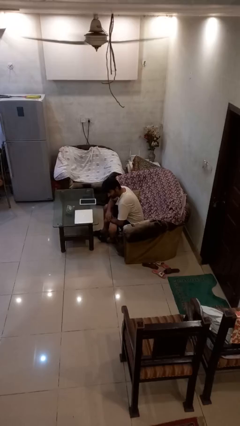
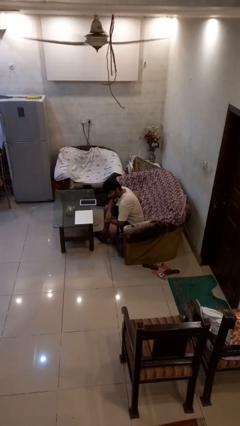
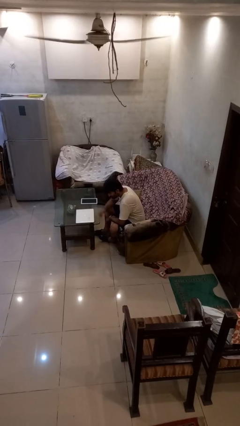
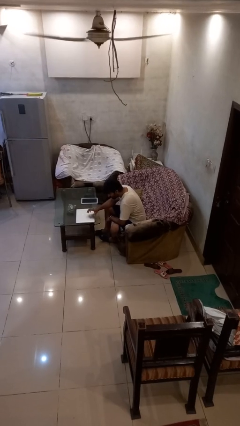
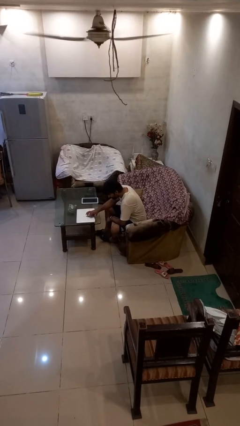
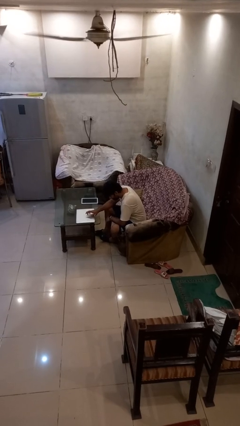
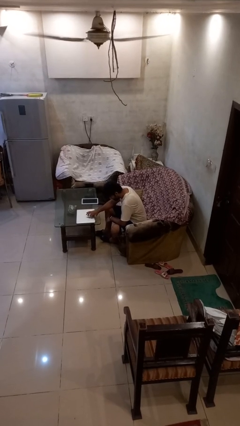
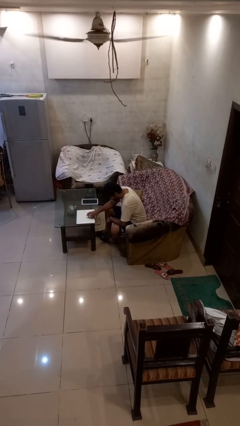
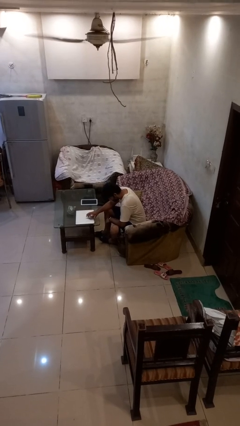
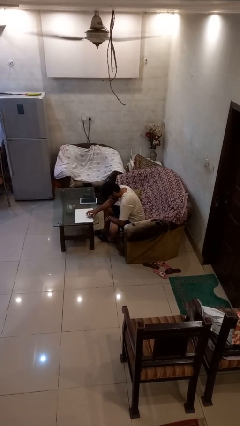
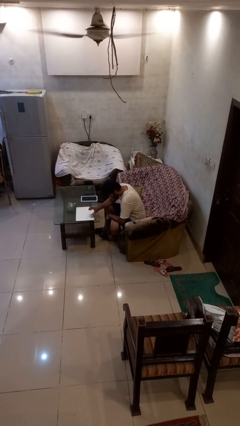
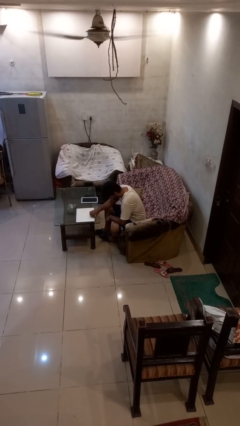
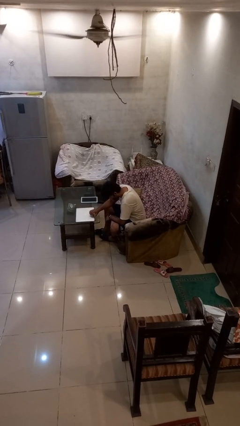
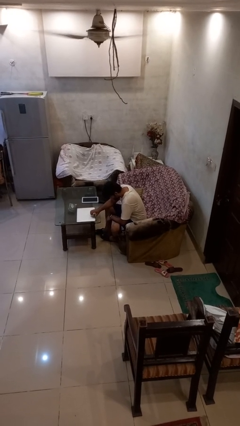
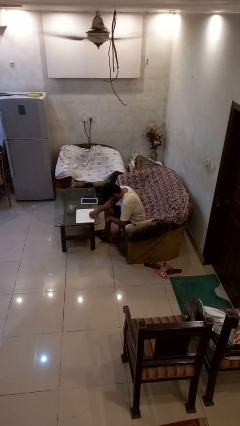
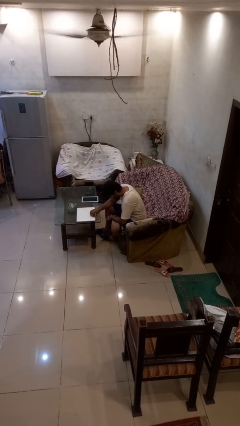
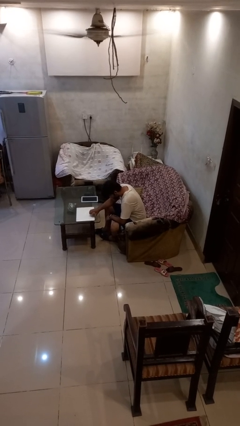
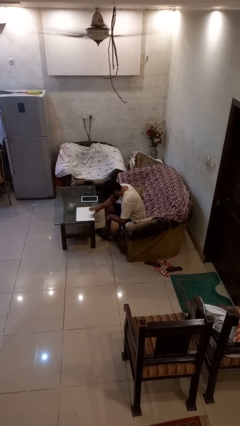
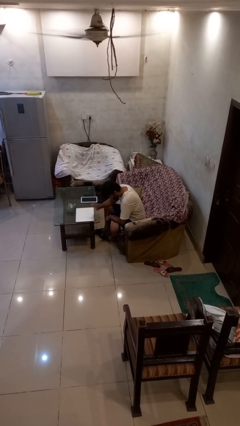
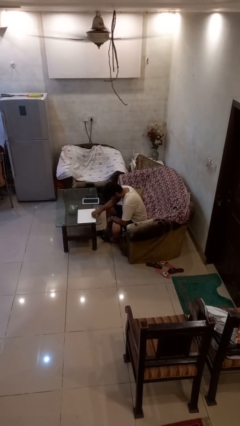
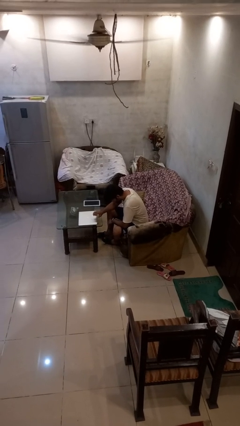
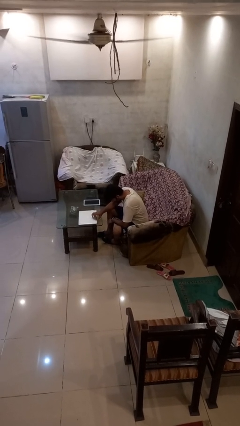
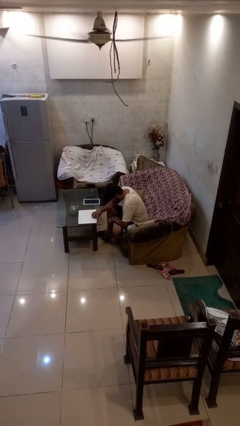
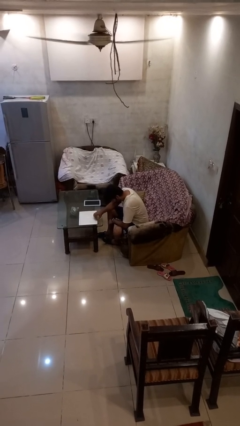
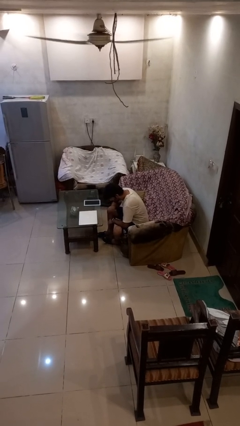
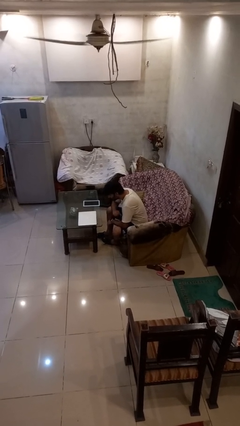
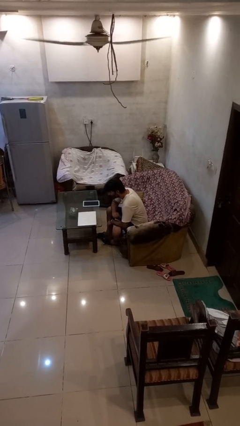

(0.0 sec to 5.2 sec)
person taps object with finger

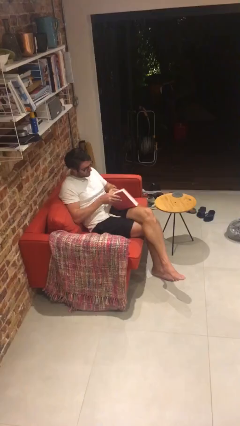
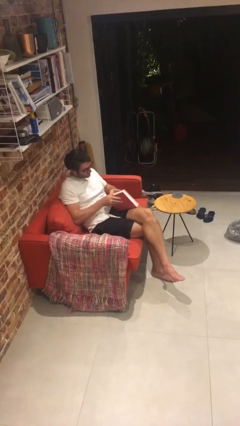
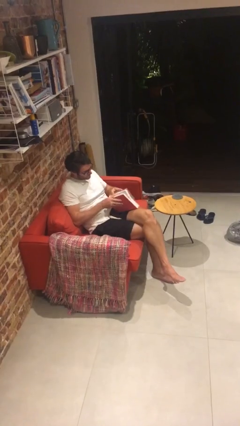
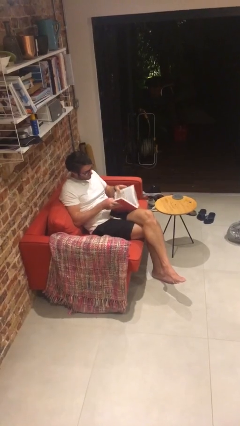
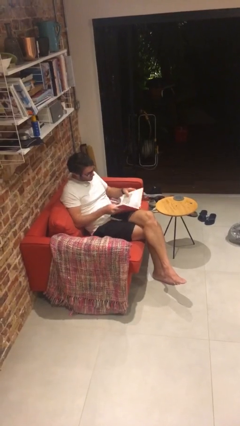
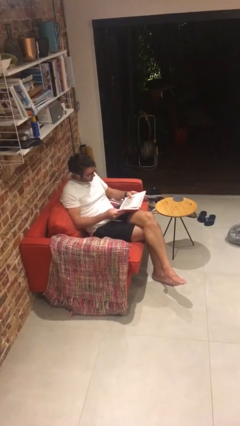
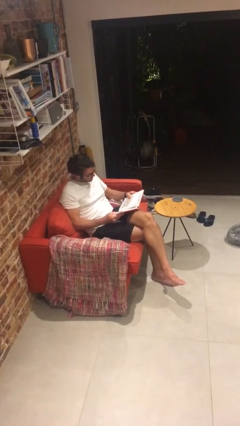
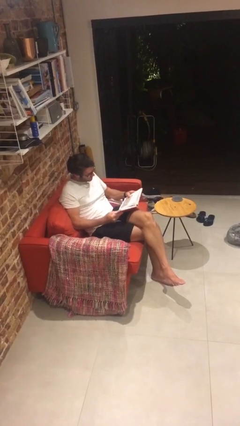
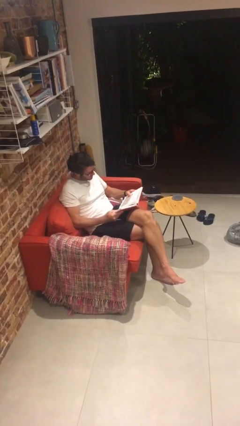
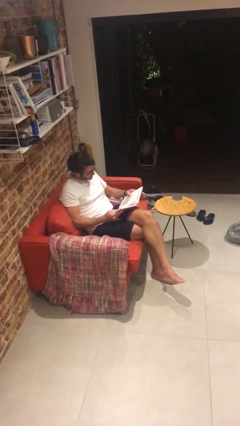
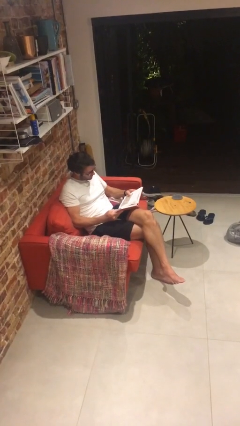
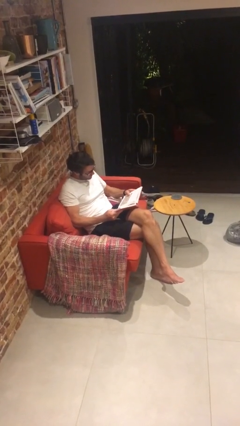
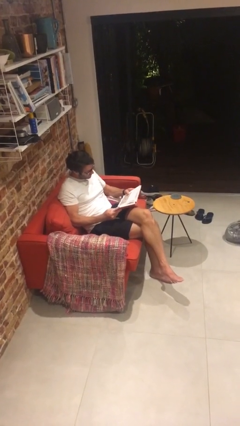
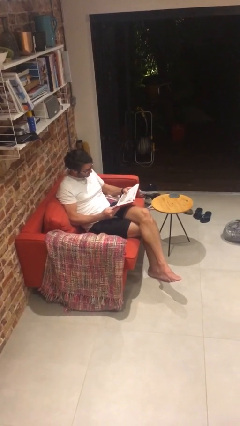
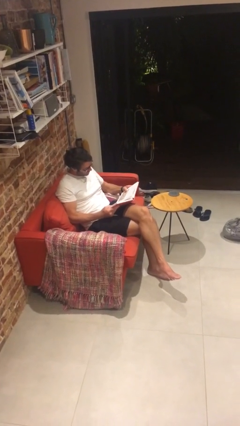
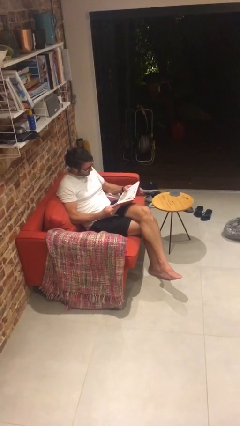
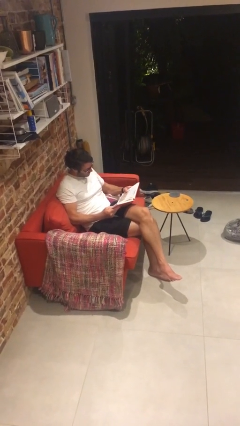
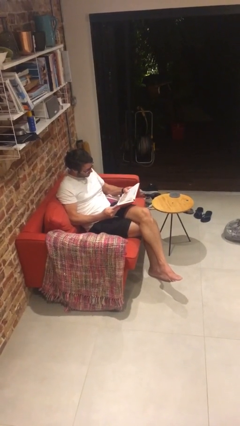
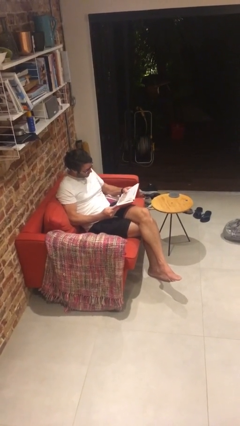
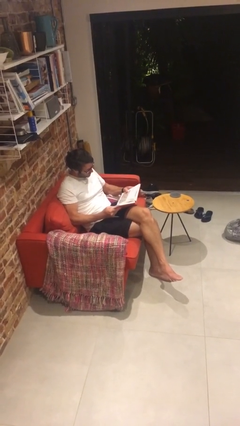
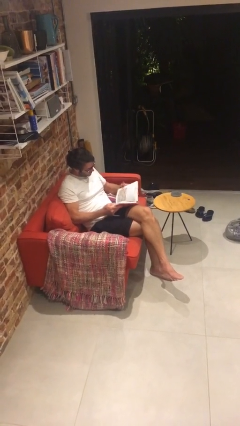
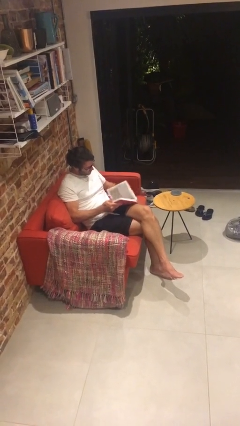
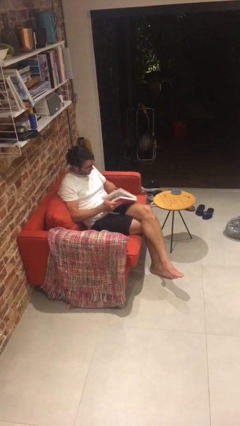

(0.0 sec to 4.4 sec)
person reads document

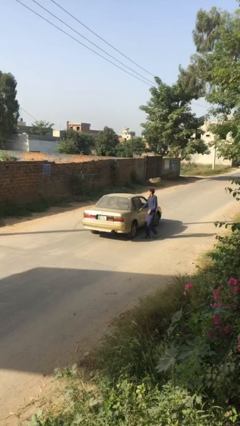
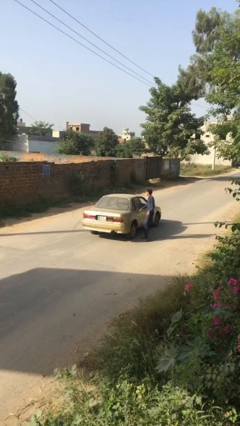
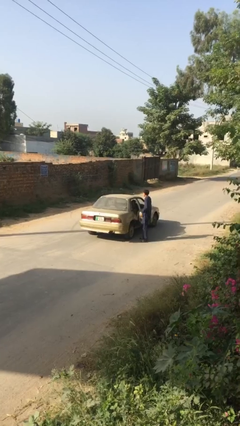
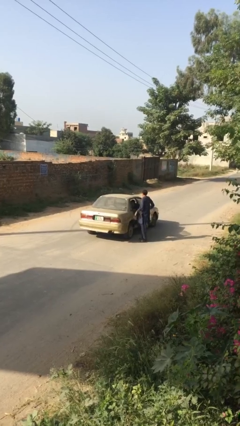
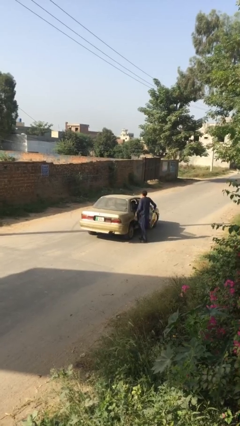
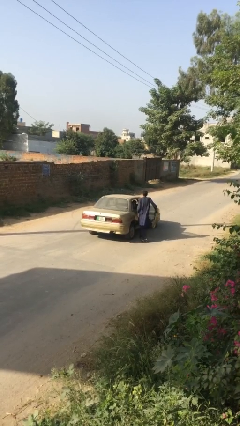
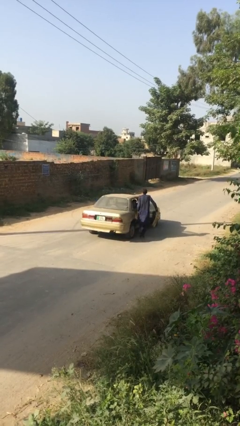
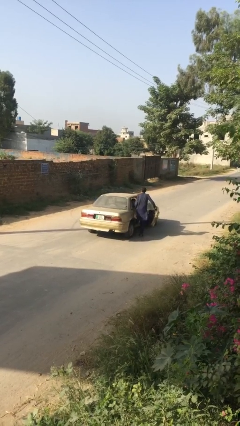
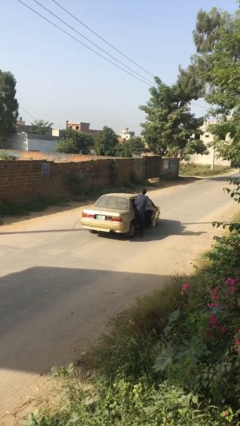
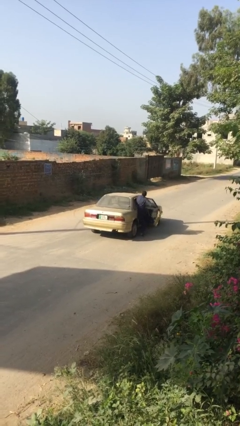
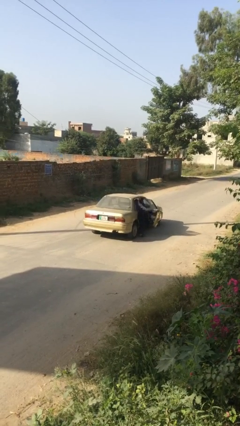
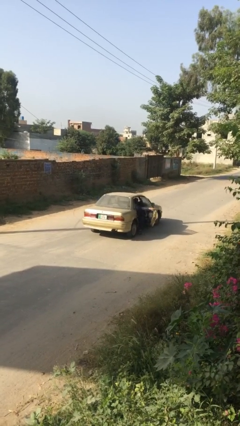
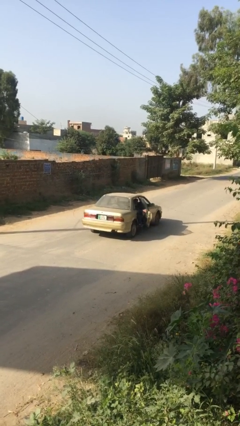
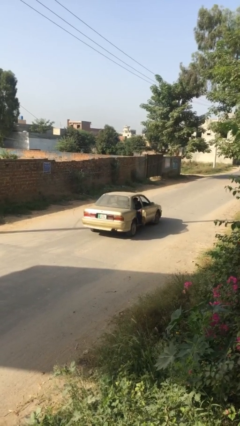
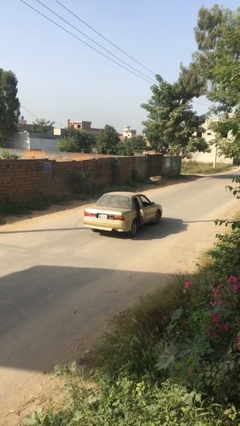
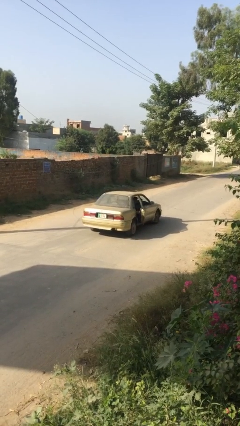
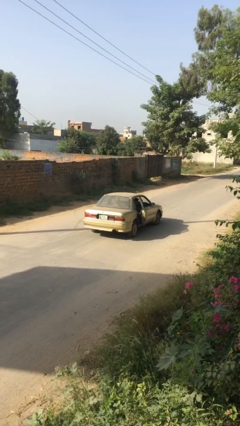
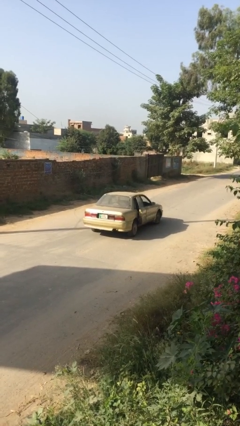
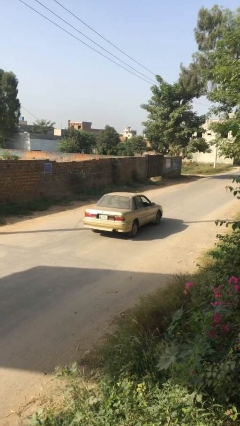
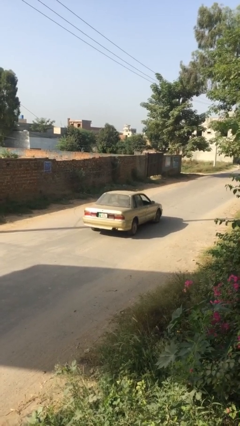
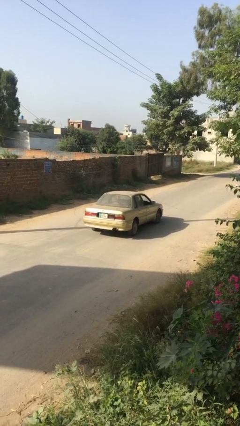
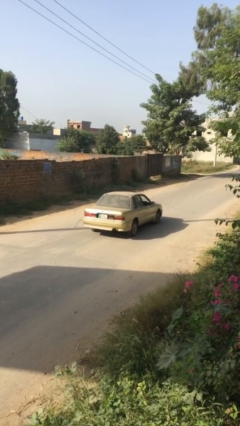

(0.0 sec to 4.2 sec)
car picks up person

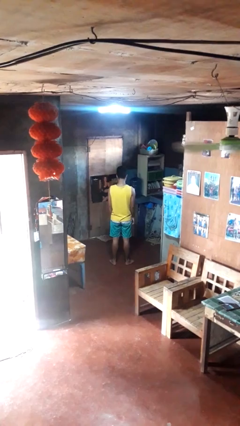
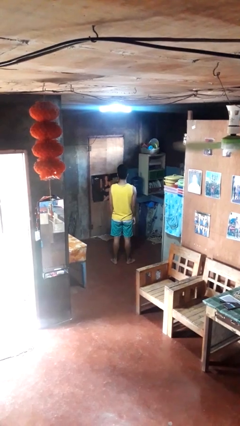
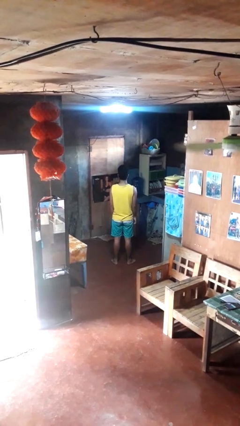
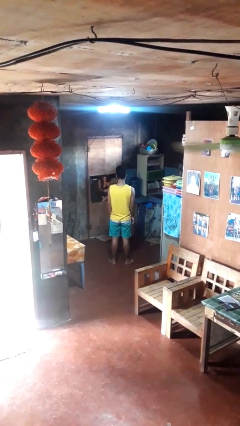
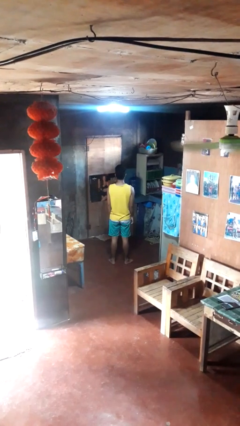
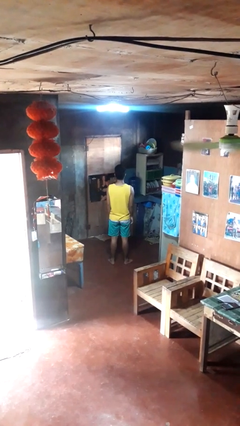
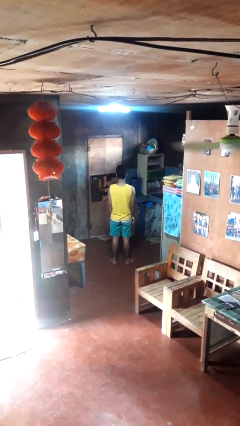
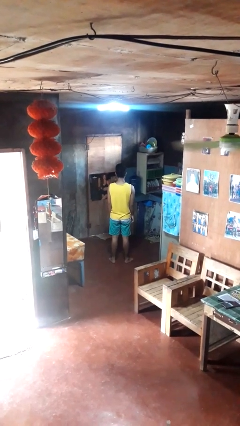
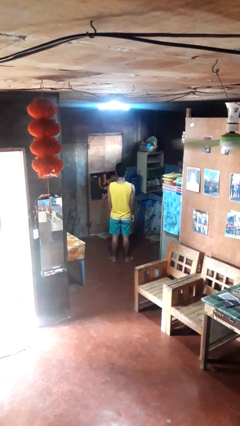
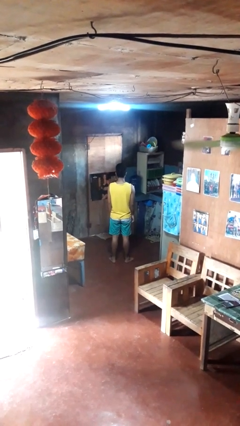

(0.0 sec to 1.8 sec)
person nods head

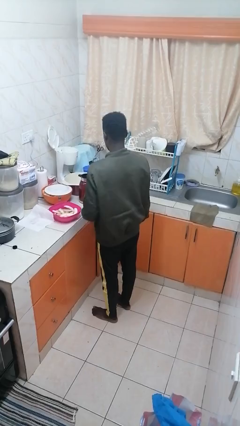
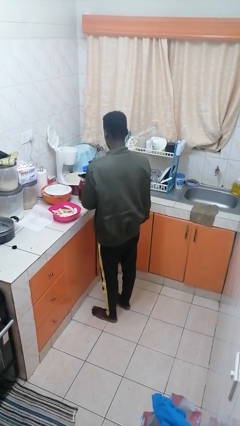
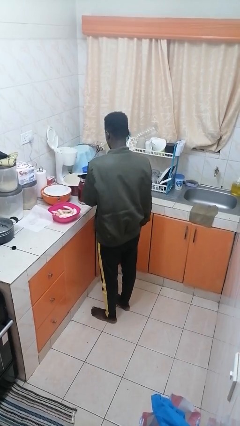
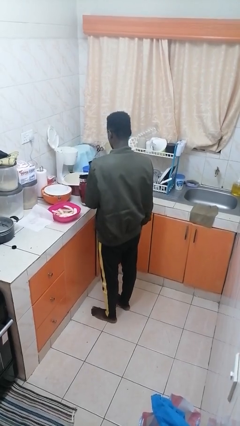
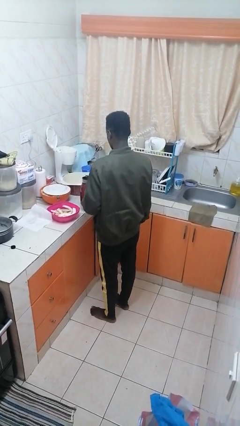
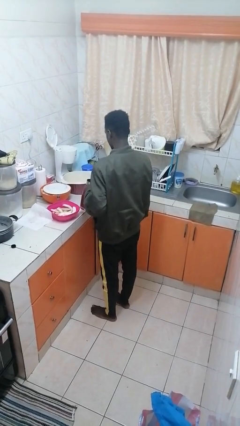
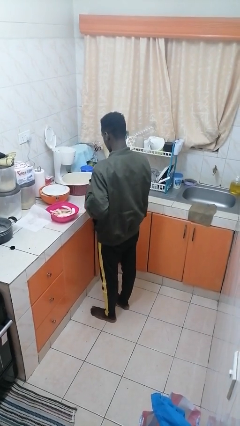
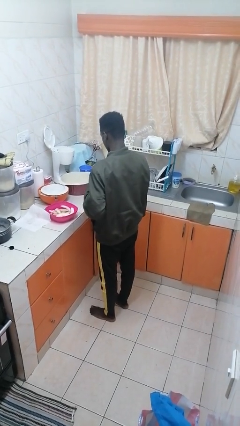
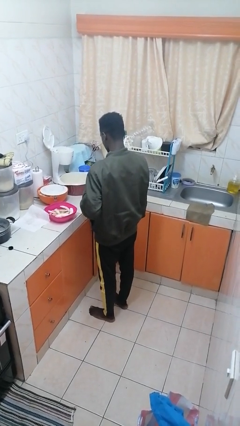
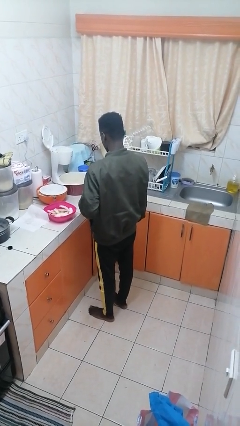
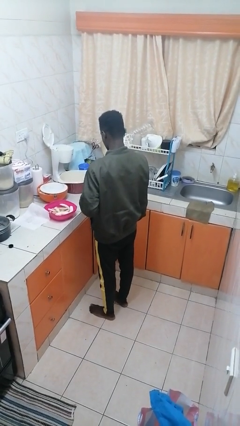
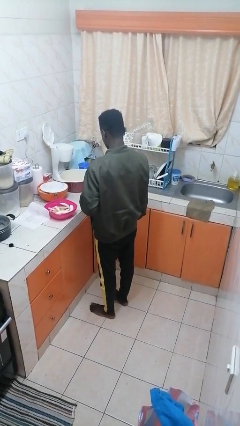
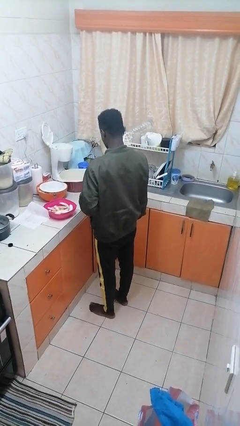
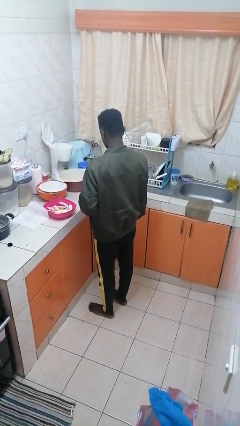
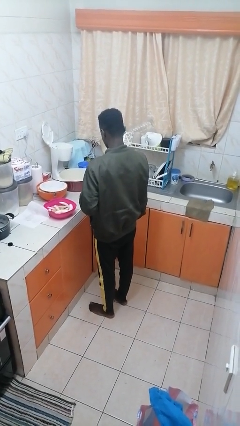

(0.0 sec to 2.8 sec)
person picks up object from countertop
